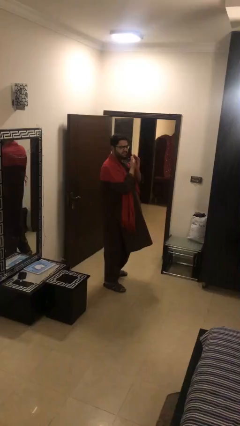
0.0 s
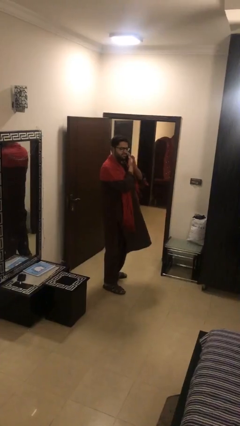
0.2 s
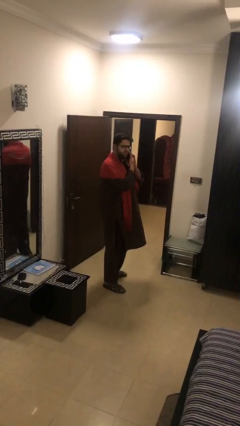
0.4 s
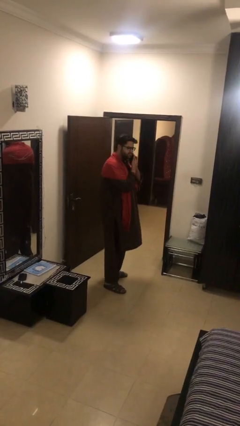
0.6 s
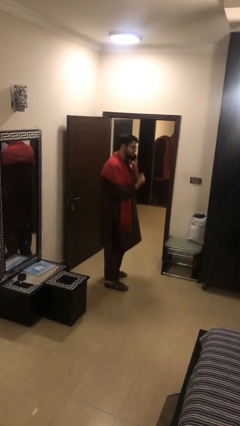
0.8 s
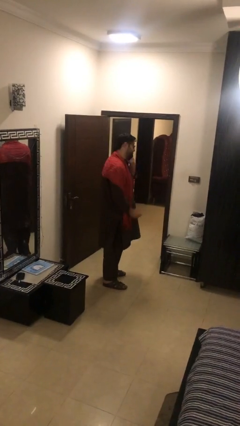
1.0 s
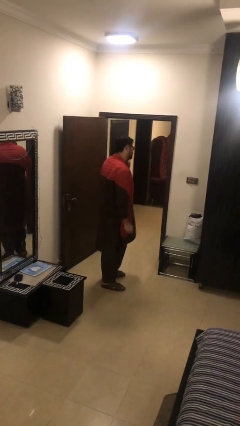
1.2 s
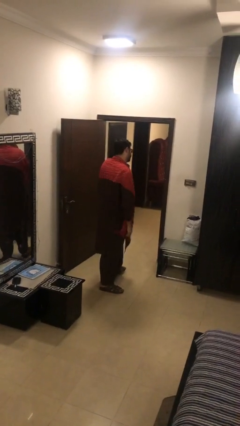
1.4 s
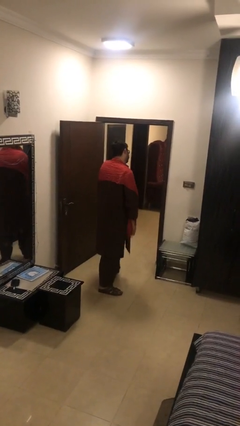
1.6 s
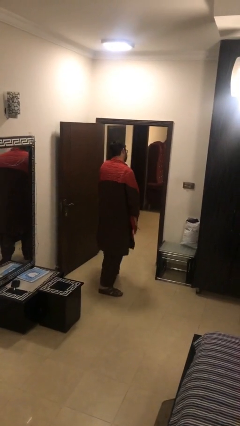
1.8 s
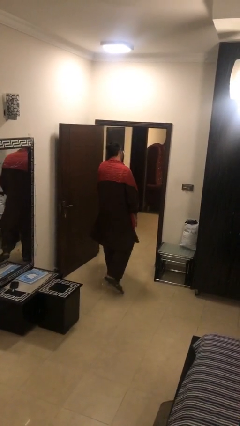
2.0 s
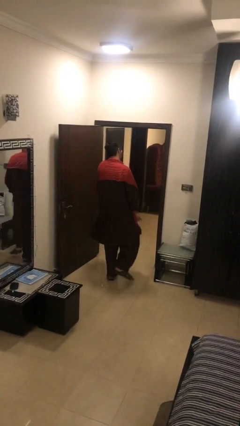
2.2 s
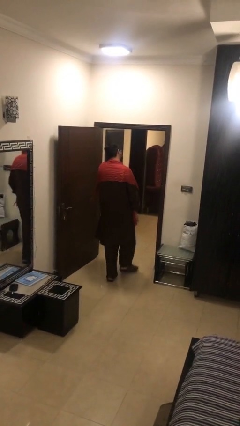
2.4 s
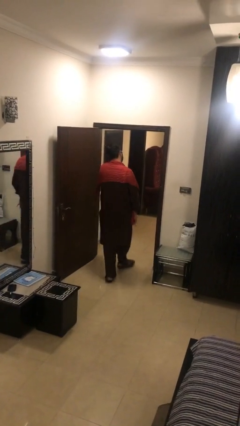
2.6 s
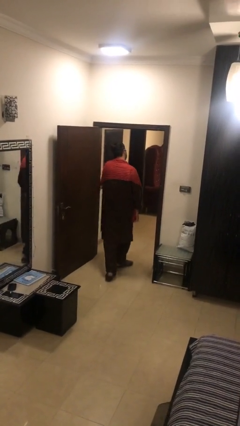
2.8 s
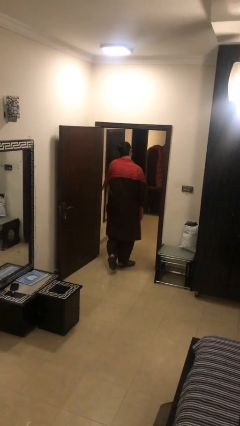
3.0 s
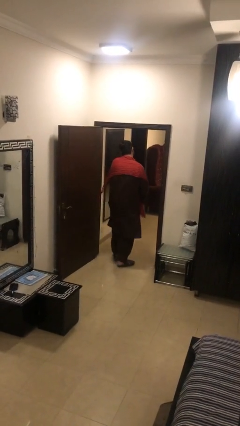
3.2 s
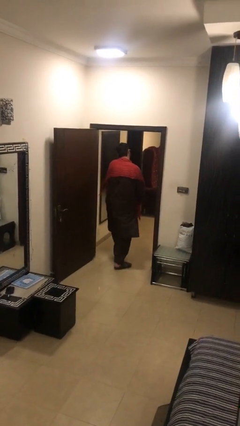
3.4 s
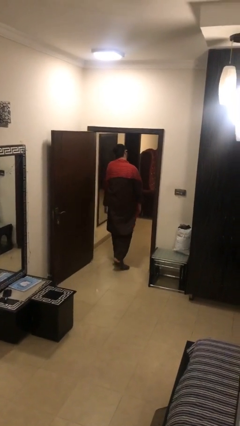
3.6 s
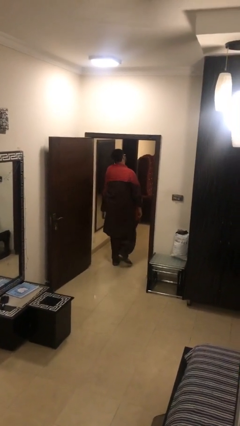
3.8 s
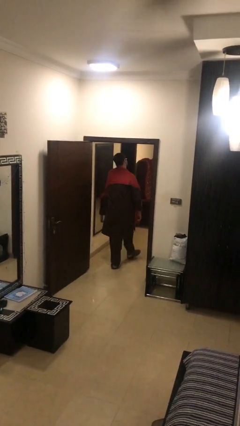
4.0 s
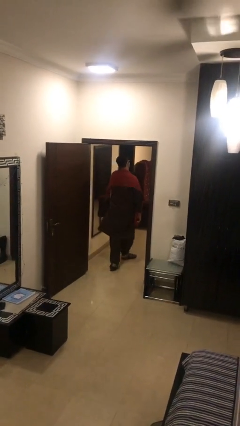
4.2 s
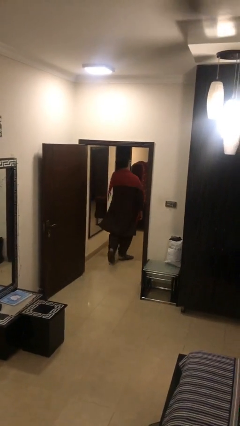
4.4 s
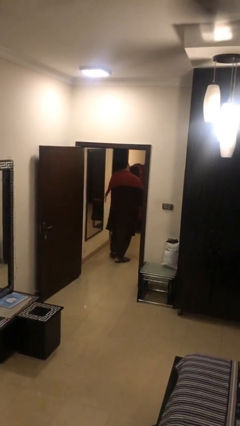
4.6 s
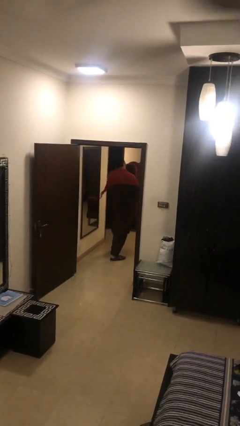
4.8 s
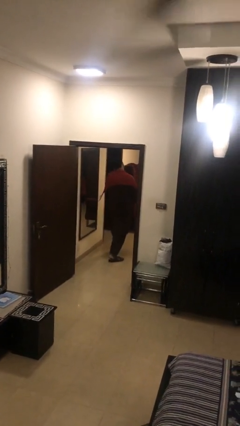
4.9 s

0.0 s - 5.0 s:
person exits scene through structure

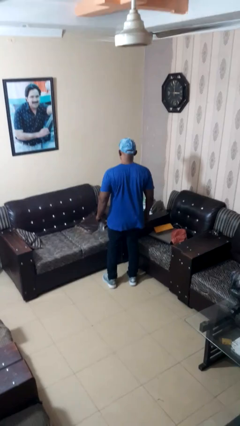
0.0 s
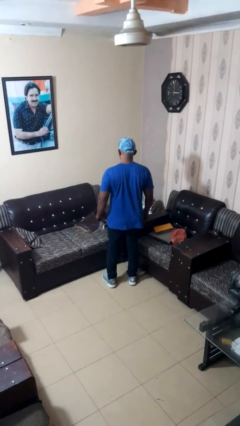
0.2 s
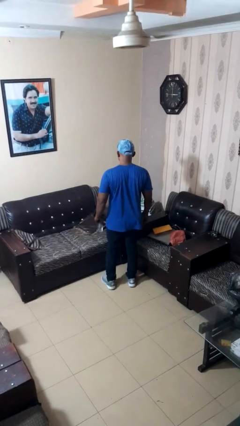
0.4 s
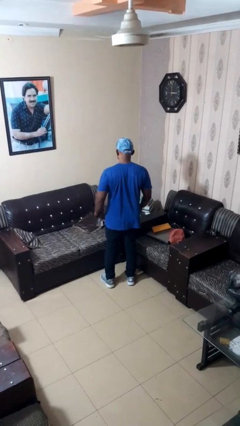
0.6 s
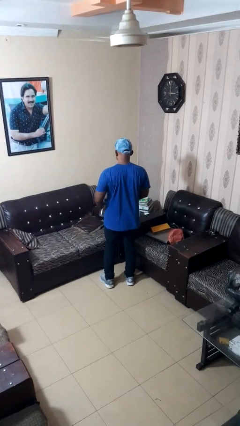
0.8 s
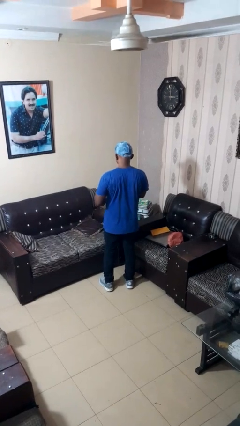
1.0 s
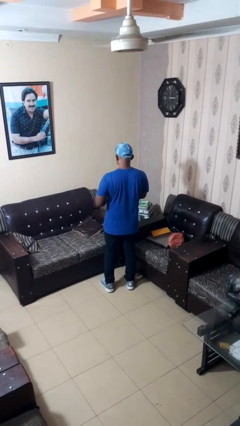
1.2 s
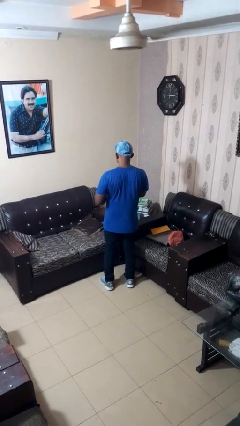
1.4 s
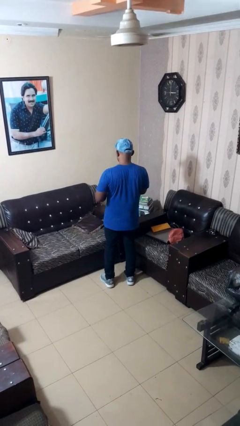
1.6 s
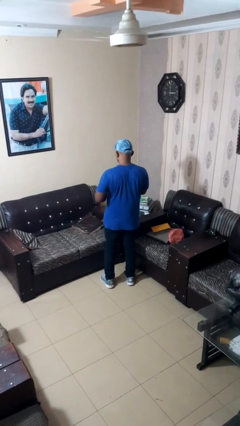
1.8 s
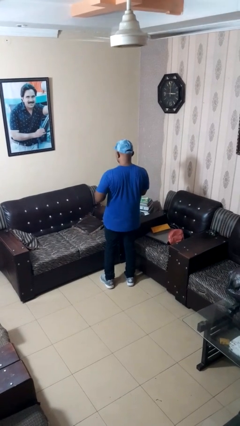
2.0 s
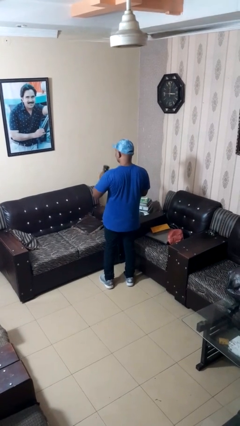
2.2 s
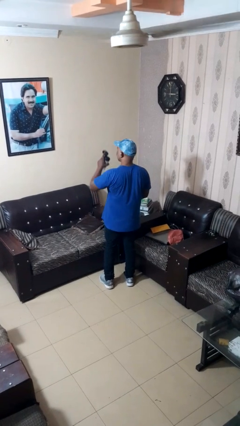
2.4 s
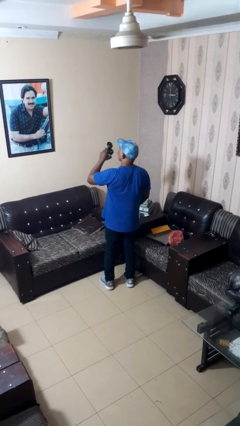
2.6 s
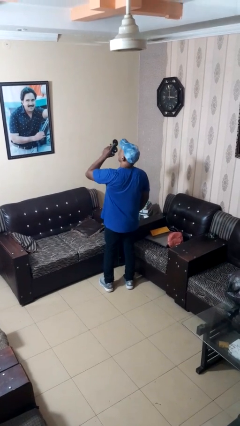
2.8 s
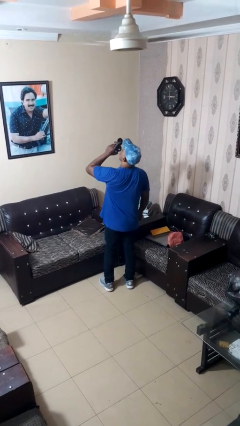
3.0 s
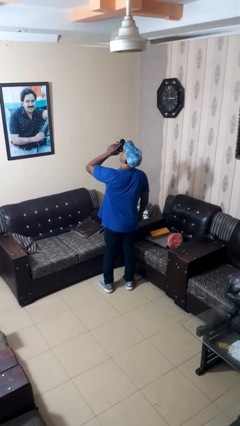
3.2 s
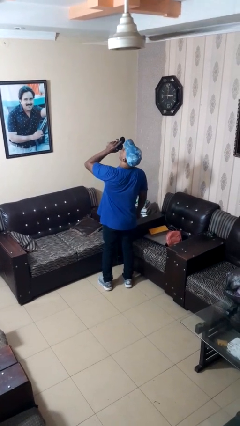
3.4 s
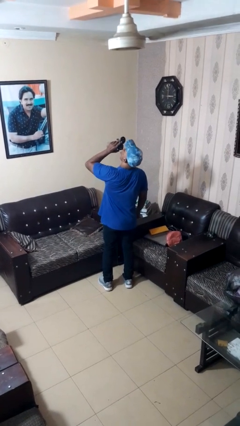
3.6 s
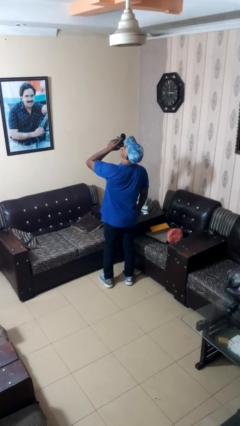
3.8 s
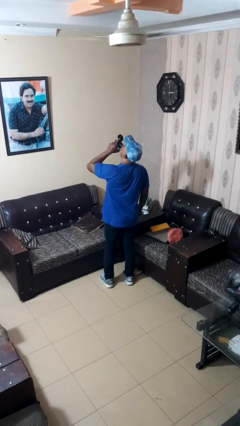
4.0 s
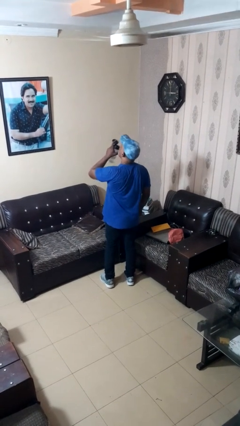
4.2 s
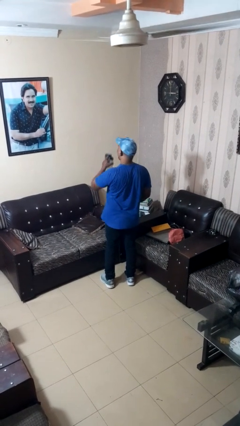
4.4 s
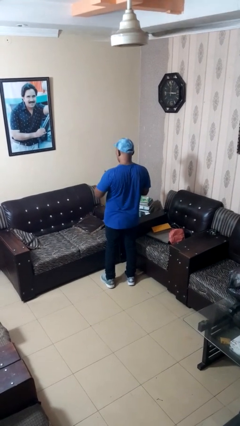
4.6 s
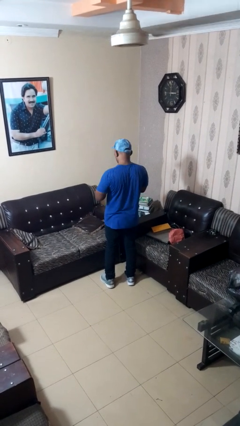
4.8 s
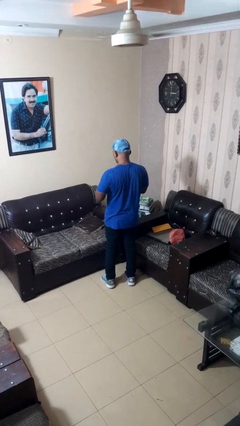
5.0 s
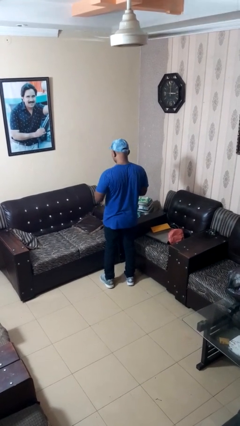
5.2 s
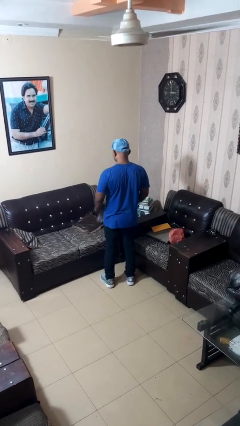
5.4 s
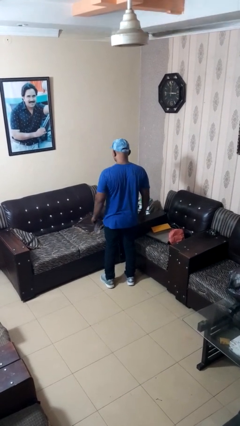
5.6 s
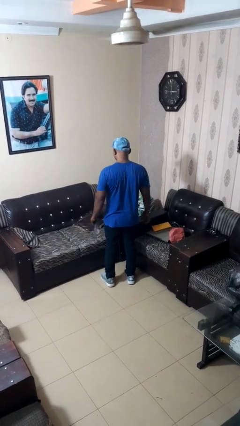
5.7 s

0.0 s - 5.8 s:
person drinks from bottle

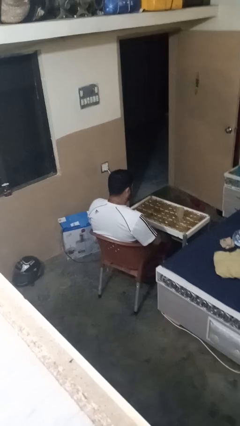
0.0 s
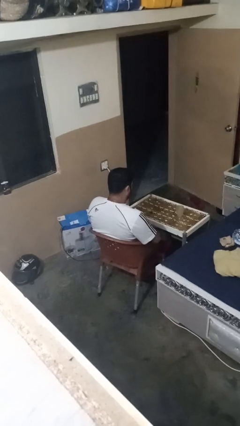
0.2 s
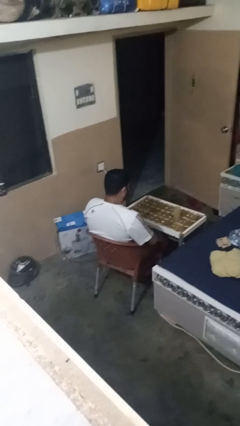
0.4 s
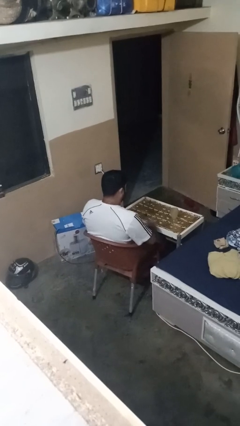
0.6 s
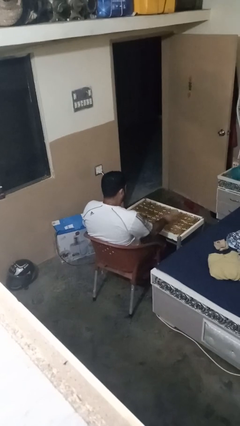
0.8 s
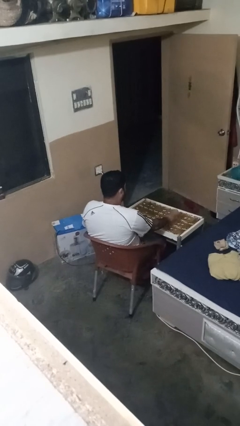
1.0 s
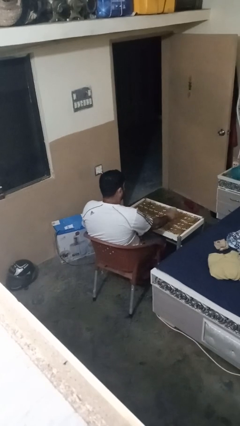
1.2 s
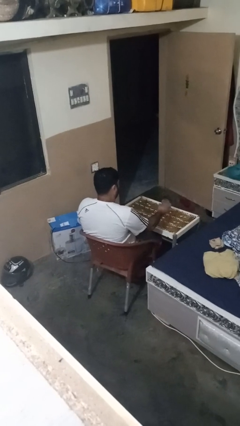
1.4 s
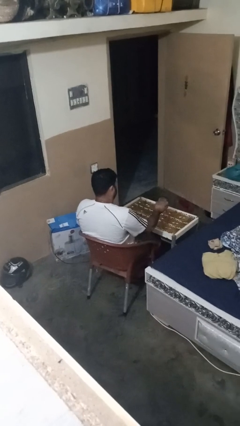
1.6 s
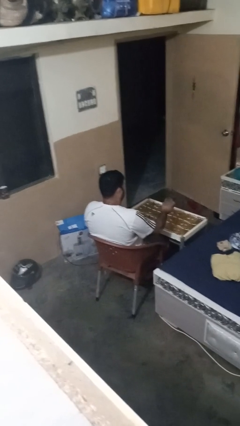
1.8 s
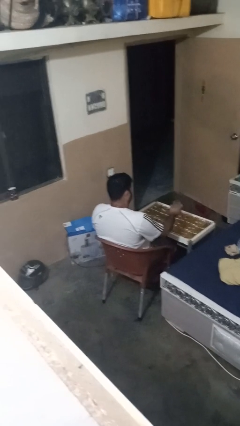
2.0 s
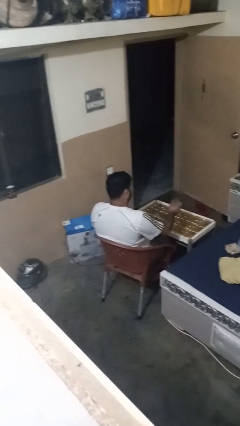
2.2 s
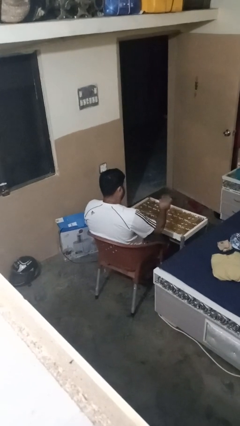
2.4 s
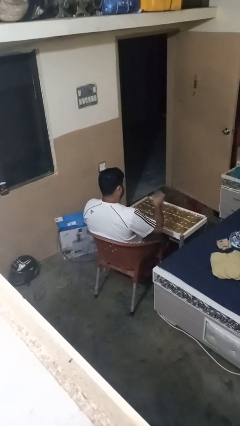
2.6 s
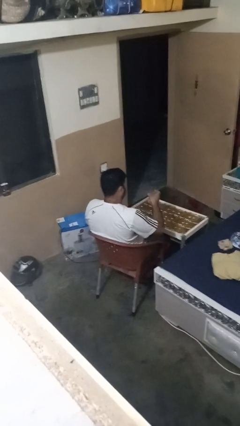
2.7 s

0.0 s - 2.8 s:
person picks up object from table

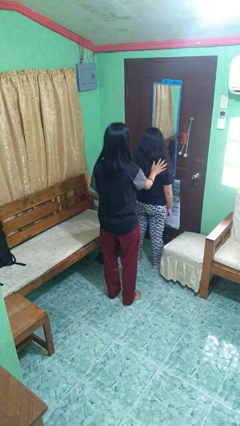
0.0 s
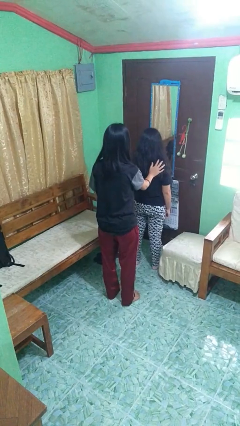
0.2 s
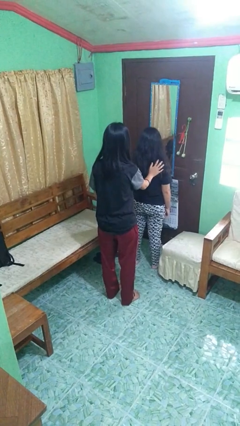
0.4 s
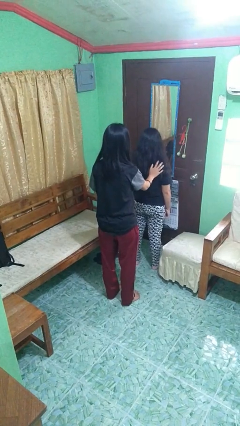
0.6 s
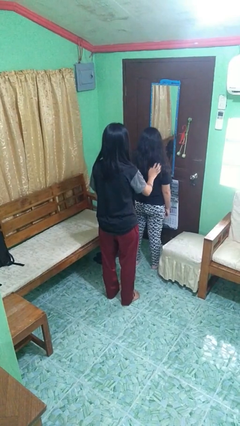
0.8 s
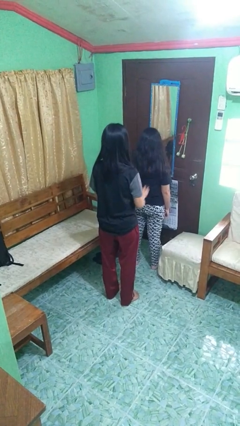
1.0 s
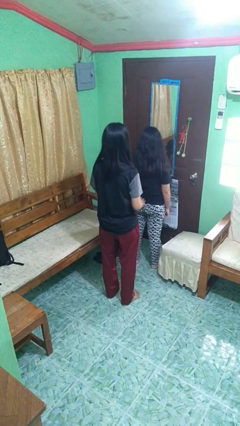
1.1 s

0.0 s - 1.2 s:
person touches back of person

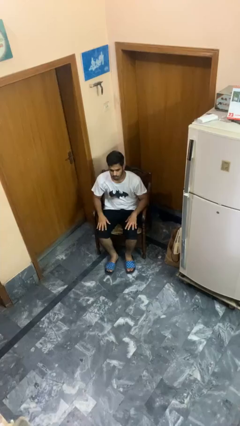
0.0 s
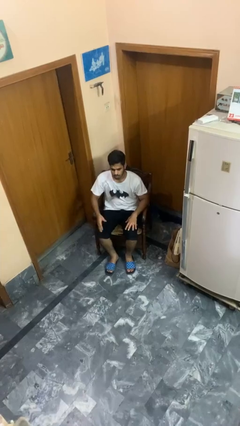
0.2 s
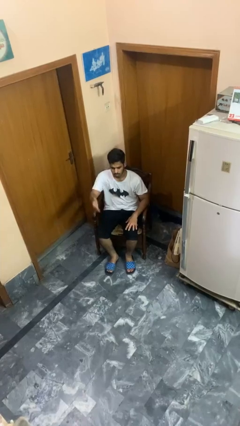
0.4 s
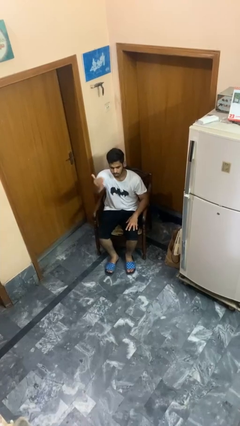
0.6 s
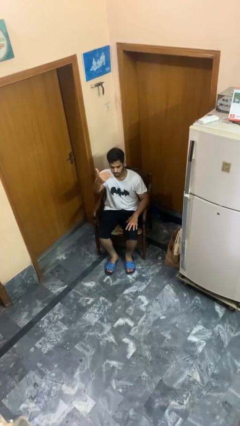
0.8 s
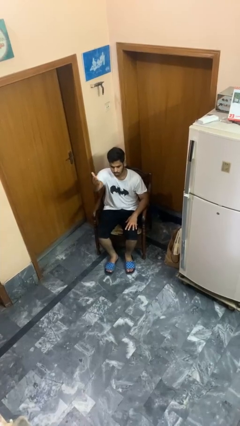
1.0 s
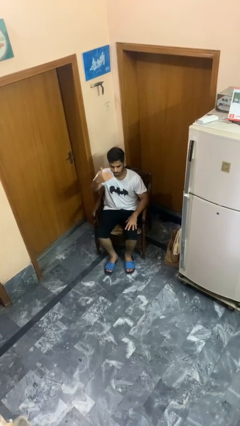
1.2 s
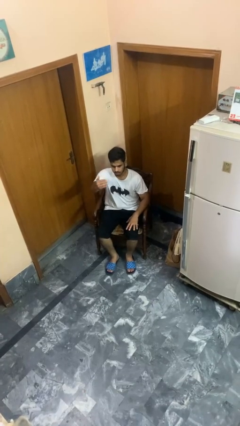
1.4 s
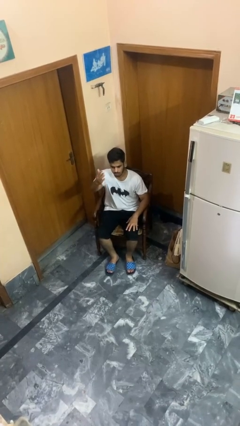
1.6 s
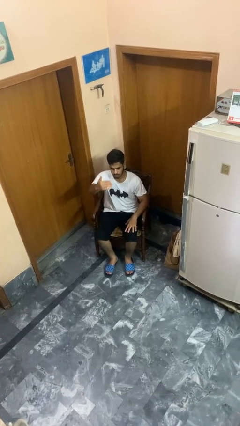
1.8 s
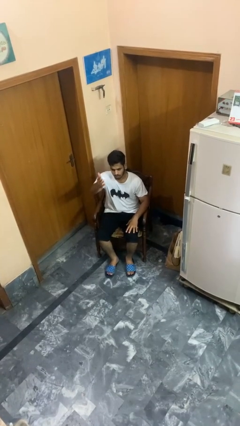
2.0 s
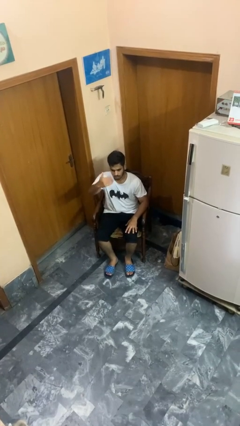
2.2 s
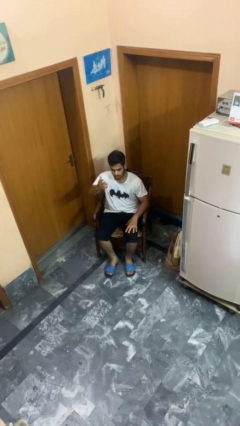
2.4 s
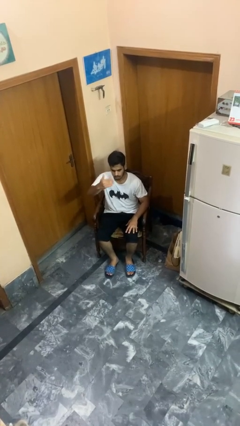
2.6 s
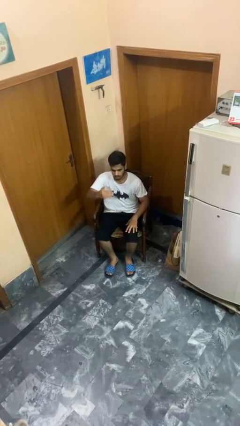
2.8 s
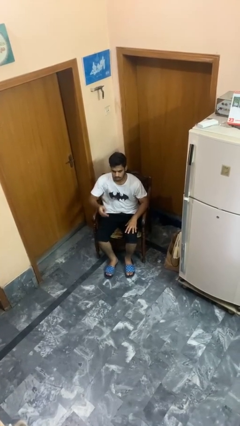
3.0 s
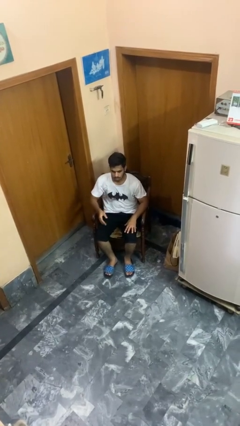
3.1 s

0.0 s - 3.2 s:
person gestures come here
